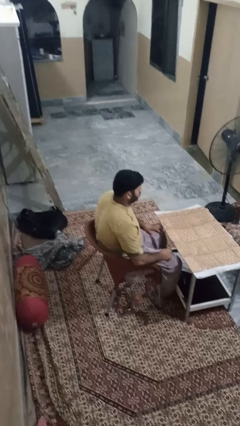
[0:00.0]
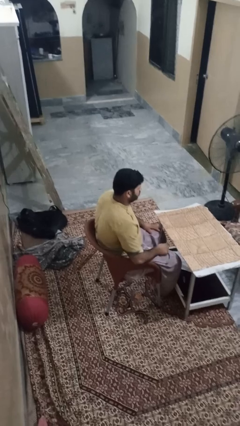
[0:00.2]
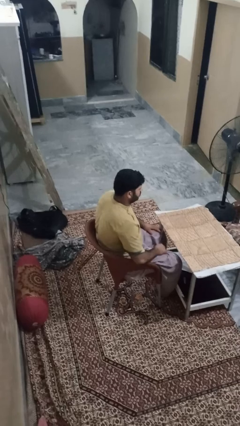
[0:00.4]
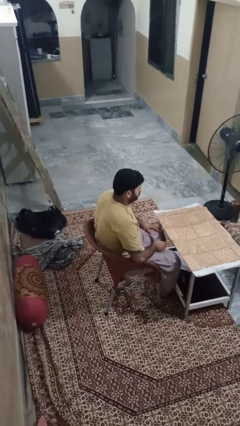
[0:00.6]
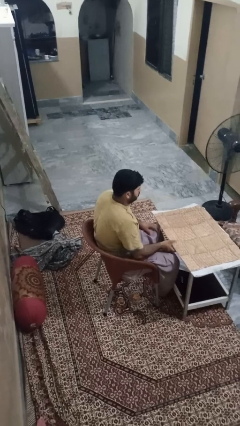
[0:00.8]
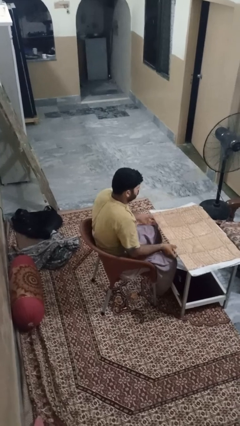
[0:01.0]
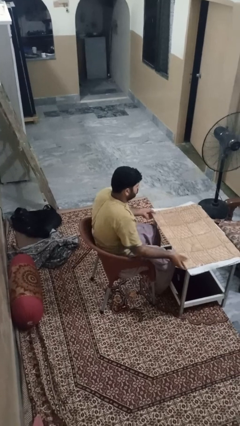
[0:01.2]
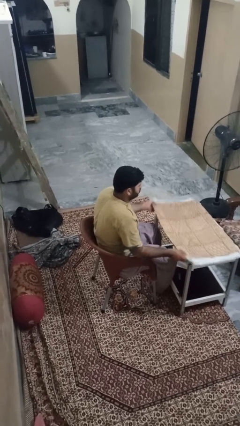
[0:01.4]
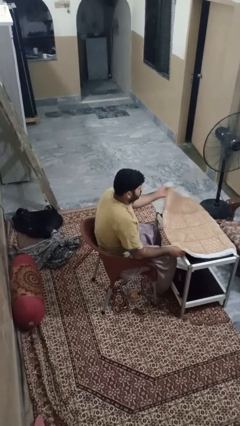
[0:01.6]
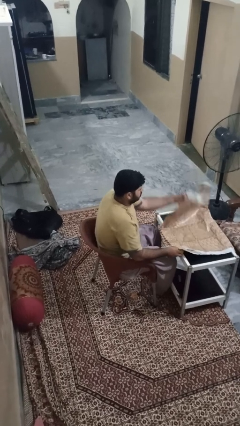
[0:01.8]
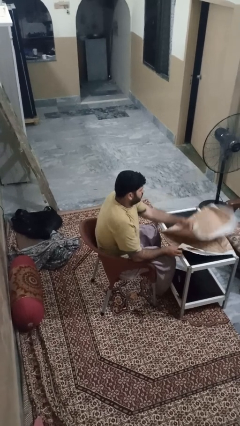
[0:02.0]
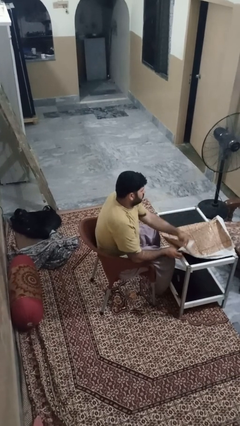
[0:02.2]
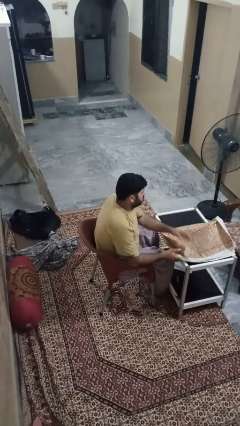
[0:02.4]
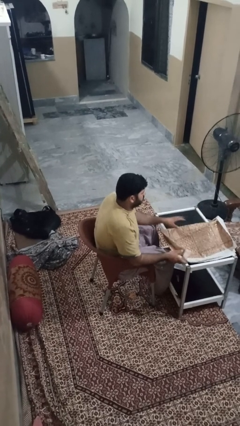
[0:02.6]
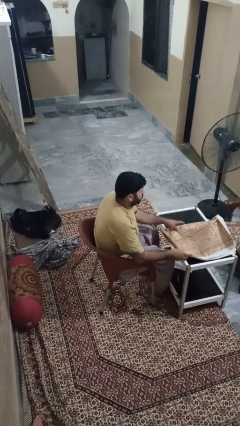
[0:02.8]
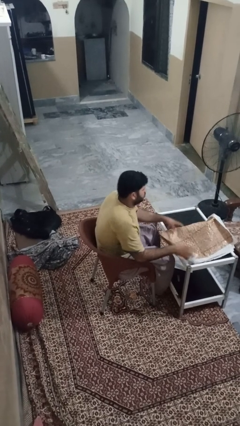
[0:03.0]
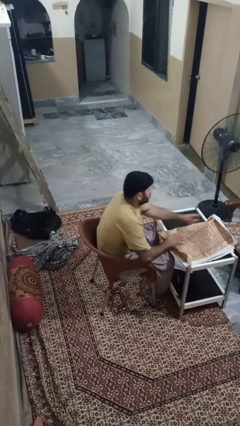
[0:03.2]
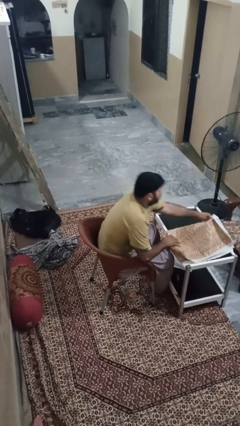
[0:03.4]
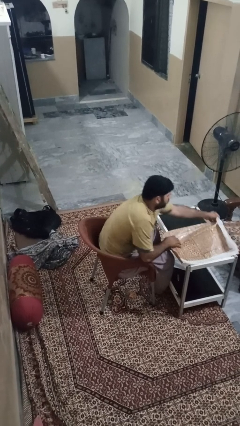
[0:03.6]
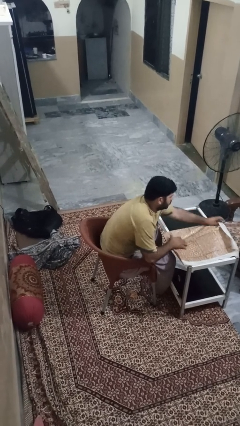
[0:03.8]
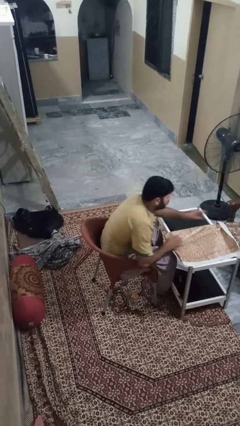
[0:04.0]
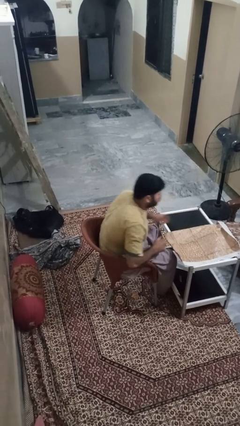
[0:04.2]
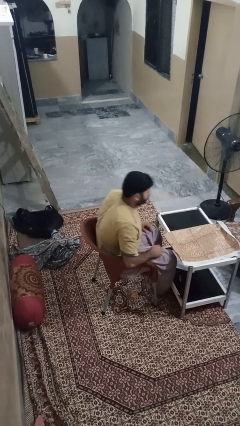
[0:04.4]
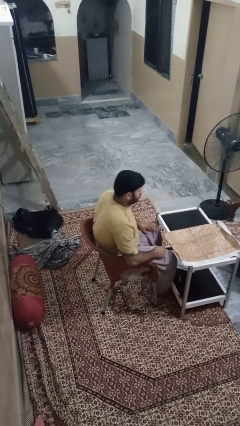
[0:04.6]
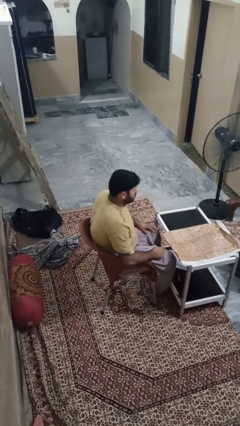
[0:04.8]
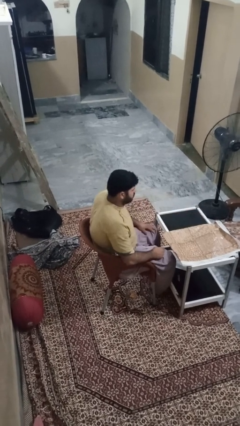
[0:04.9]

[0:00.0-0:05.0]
person folds tablecloth

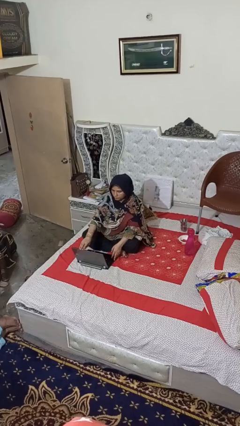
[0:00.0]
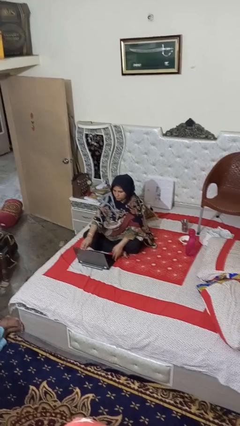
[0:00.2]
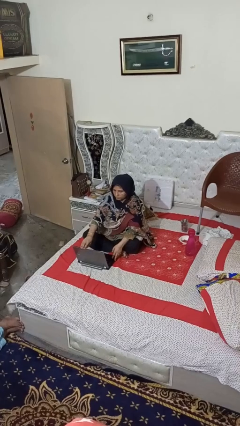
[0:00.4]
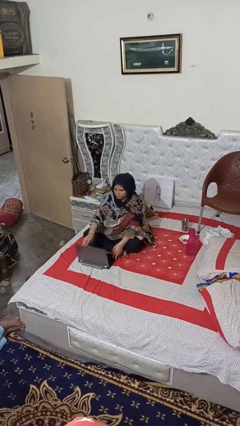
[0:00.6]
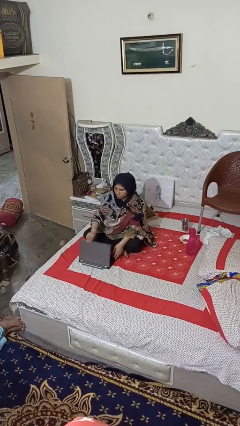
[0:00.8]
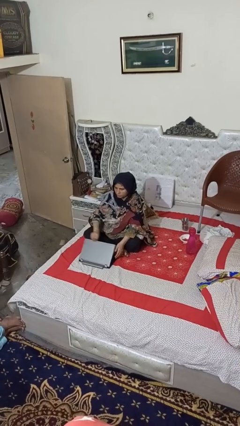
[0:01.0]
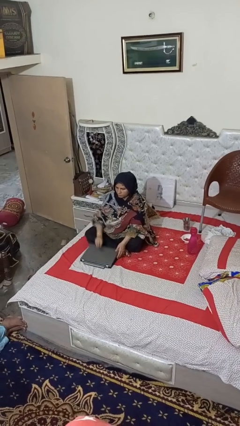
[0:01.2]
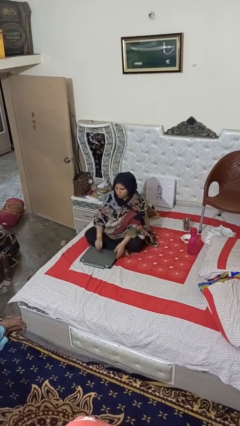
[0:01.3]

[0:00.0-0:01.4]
person closes laptop

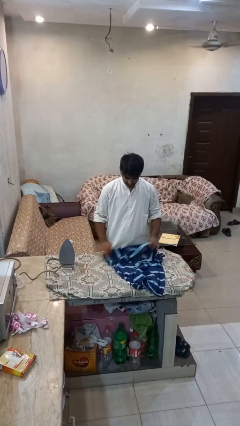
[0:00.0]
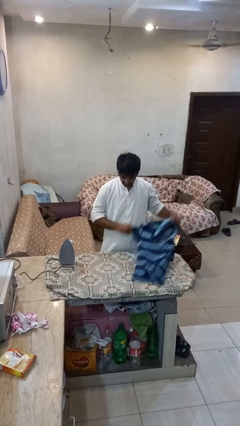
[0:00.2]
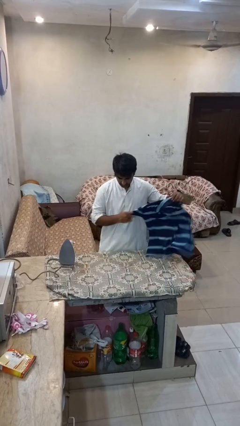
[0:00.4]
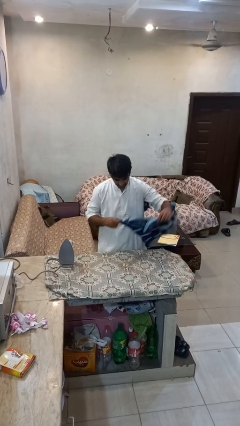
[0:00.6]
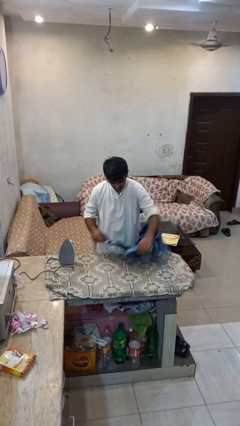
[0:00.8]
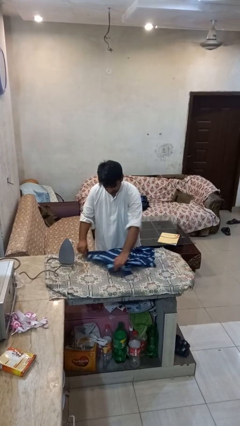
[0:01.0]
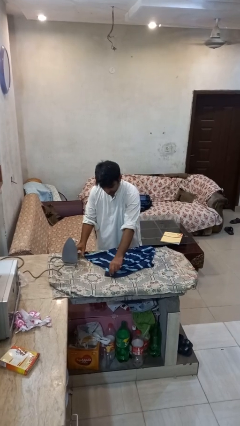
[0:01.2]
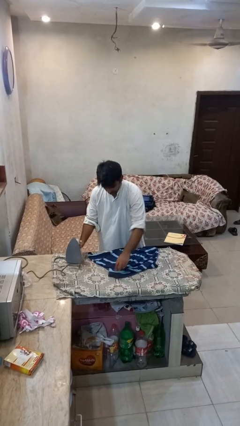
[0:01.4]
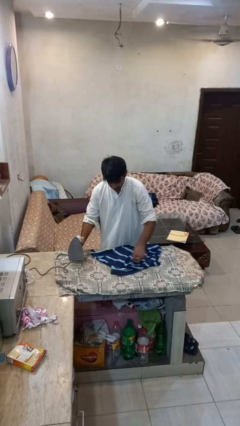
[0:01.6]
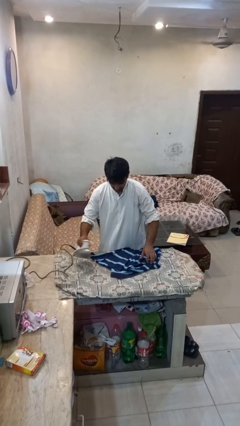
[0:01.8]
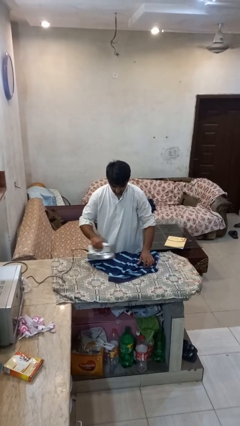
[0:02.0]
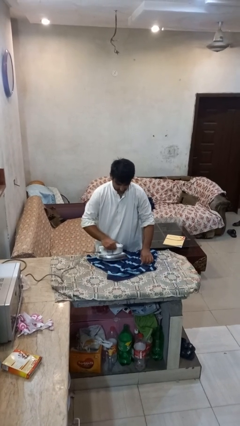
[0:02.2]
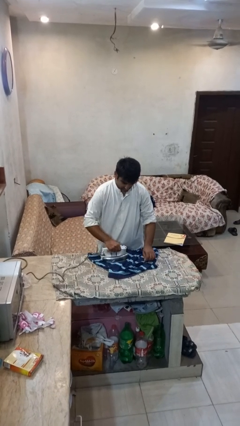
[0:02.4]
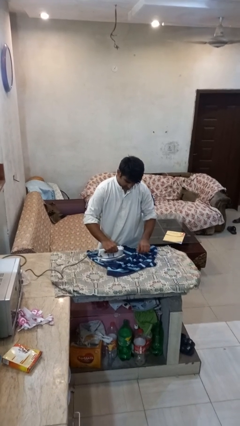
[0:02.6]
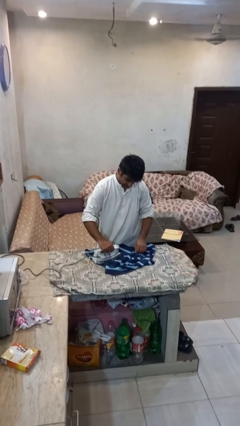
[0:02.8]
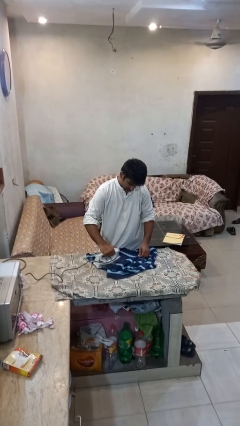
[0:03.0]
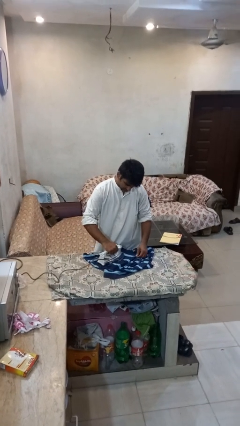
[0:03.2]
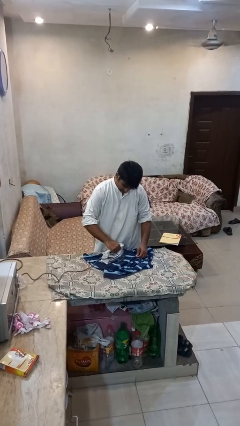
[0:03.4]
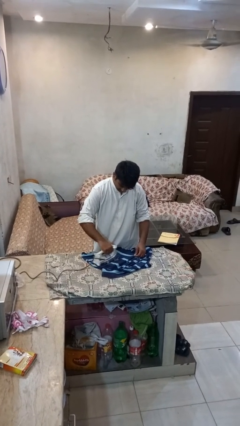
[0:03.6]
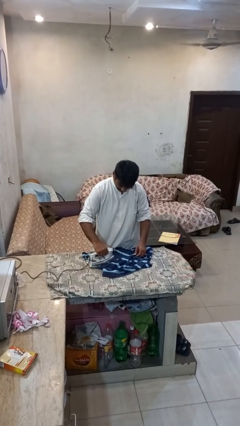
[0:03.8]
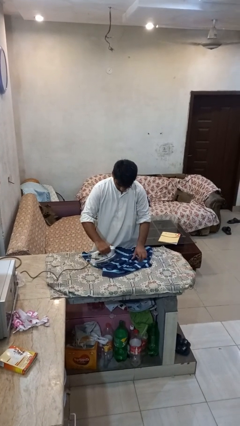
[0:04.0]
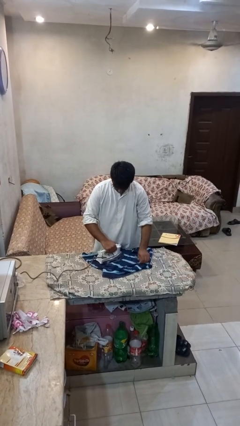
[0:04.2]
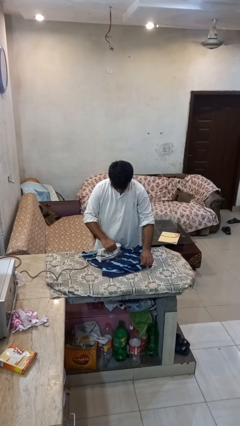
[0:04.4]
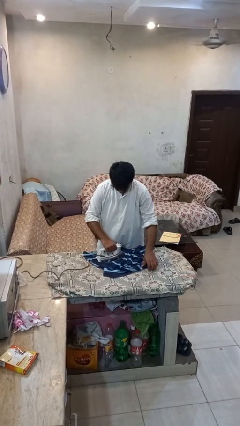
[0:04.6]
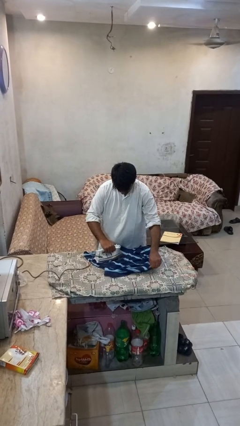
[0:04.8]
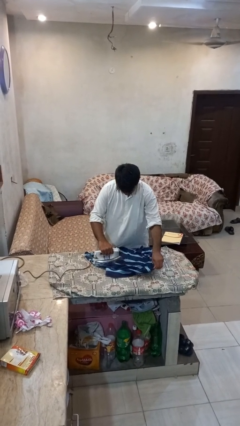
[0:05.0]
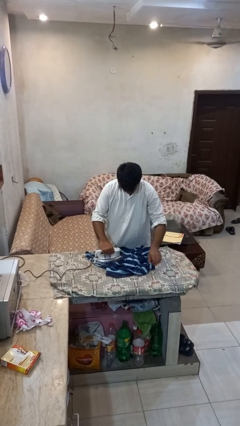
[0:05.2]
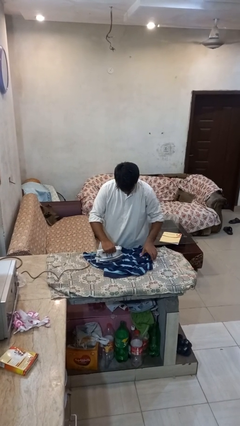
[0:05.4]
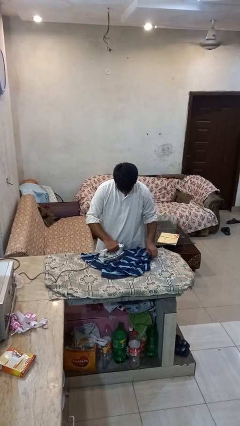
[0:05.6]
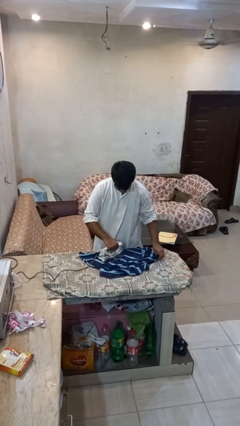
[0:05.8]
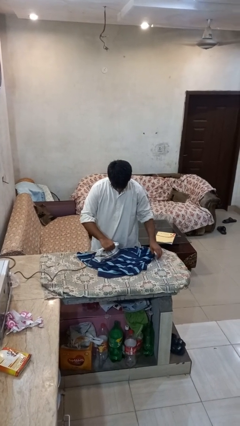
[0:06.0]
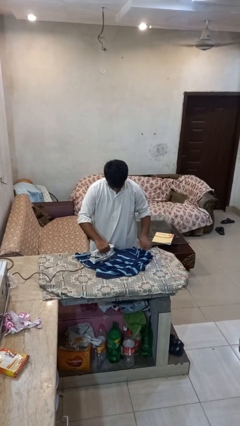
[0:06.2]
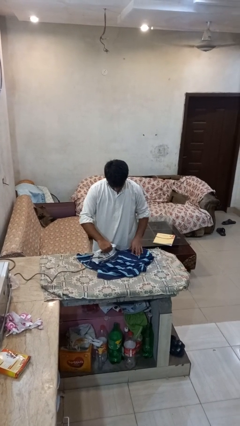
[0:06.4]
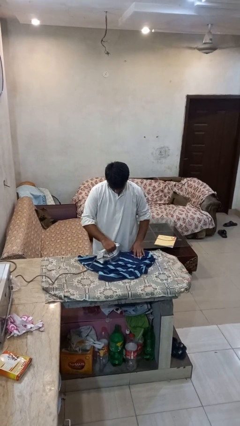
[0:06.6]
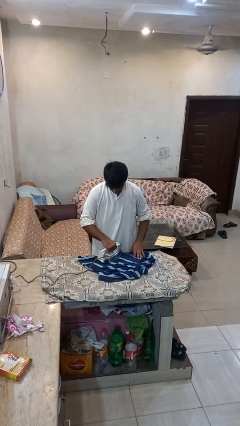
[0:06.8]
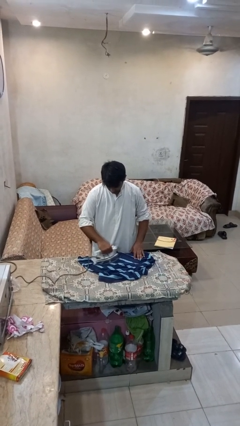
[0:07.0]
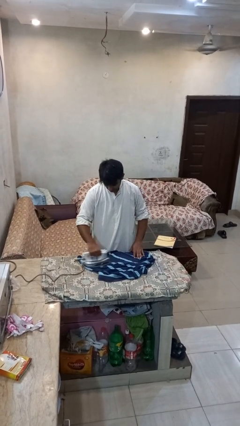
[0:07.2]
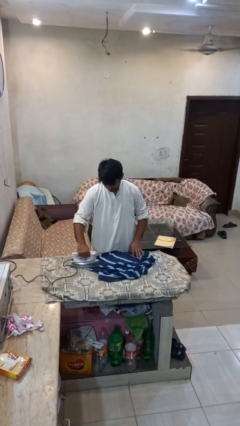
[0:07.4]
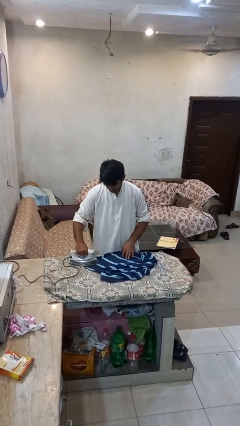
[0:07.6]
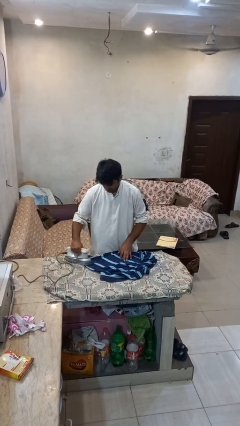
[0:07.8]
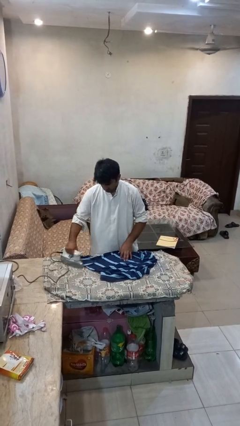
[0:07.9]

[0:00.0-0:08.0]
person irons clothes

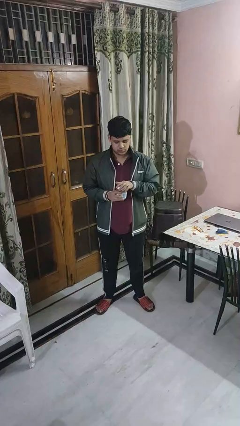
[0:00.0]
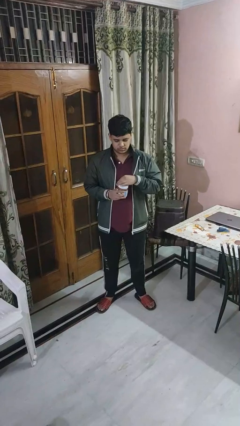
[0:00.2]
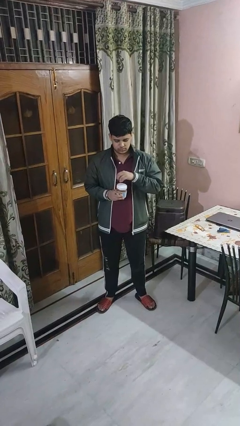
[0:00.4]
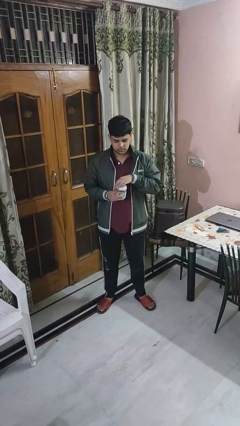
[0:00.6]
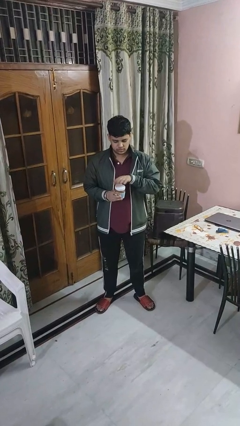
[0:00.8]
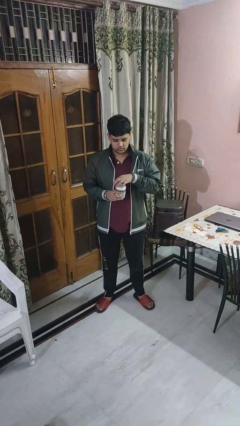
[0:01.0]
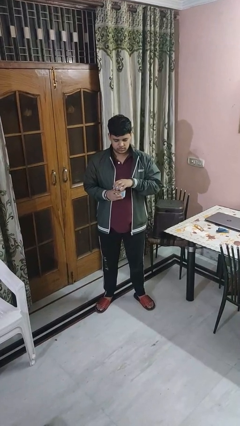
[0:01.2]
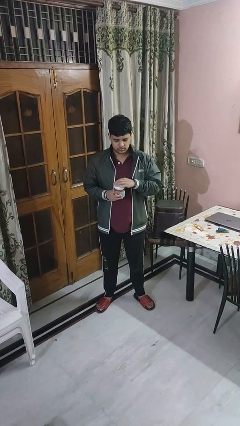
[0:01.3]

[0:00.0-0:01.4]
person closes jar

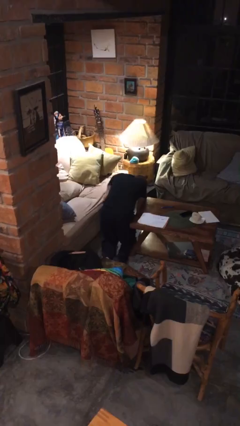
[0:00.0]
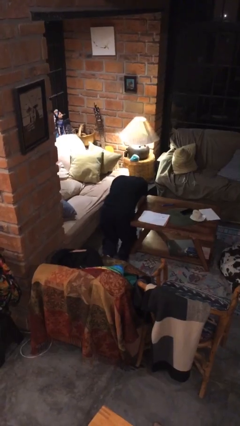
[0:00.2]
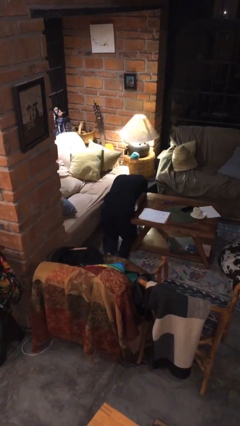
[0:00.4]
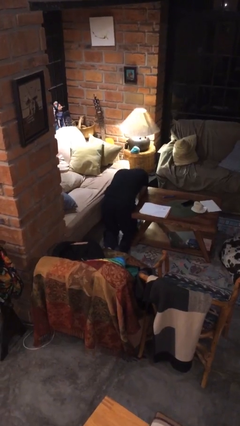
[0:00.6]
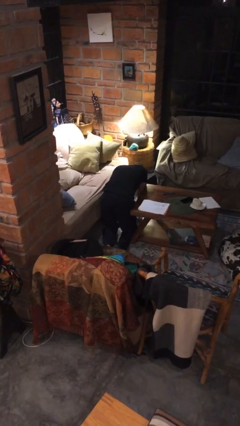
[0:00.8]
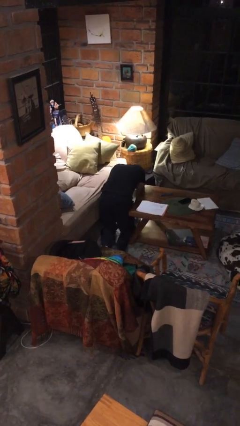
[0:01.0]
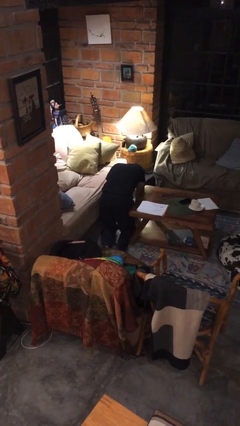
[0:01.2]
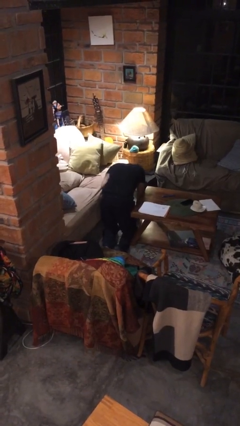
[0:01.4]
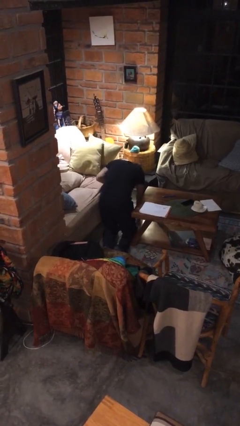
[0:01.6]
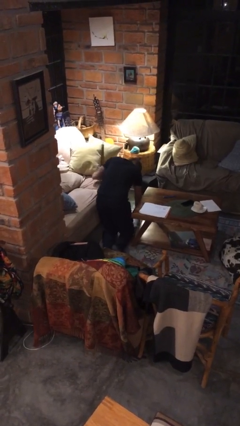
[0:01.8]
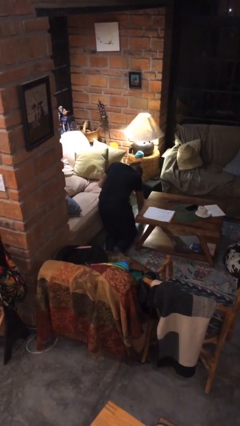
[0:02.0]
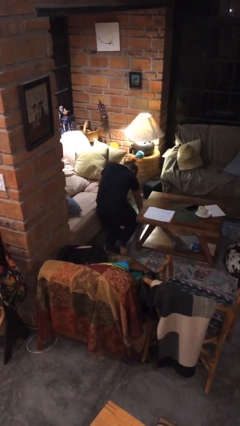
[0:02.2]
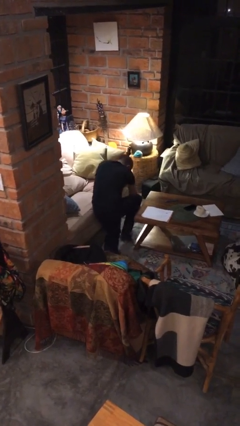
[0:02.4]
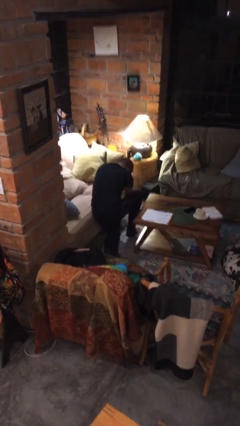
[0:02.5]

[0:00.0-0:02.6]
person searches under couch
